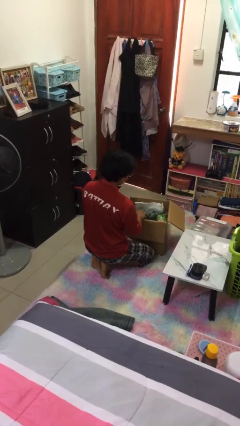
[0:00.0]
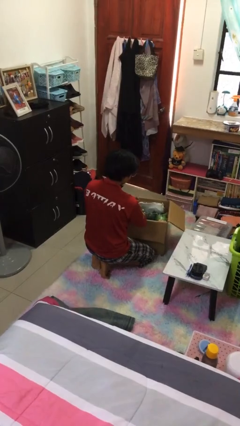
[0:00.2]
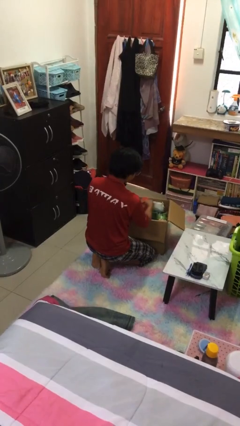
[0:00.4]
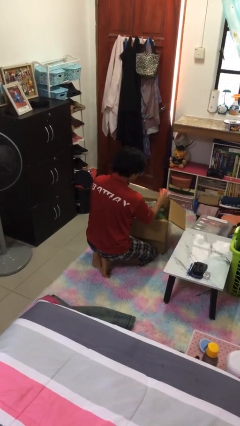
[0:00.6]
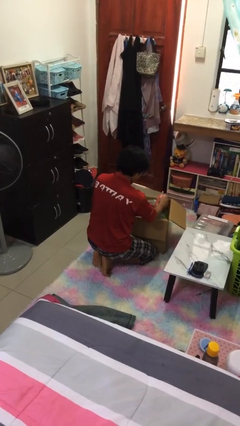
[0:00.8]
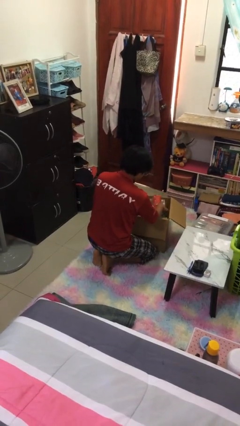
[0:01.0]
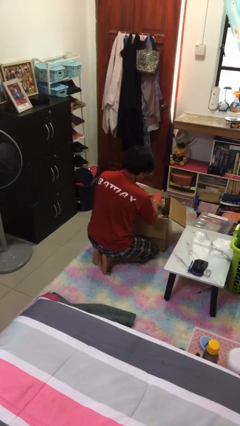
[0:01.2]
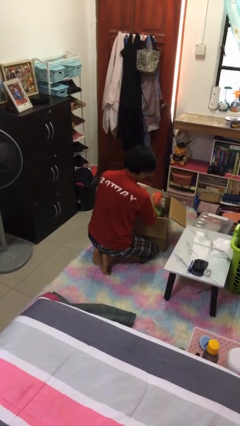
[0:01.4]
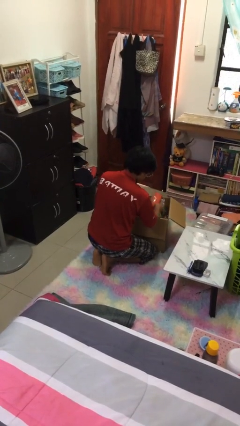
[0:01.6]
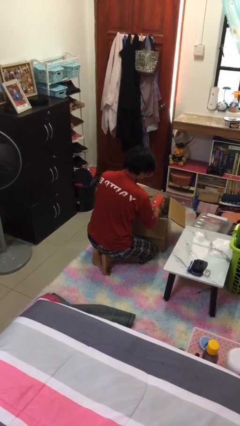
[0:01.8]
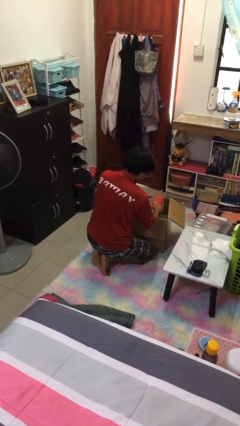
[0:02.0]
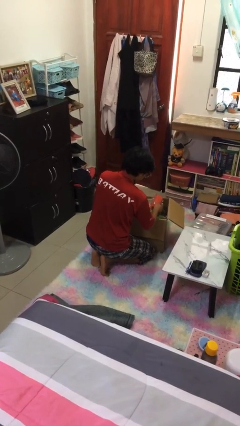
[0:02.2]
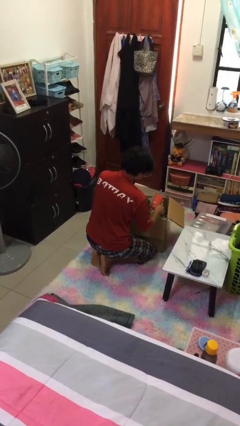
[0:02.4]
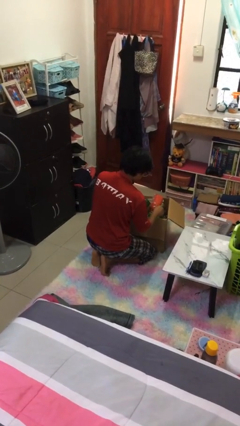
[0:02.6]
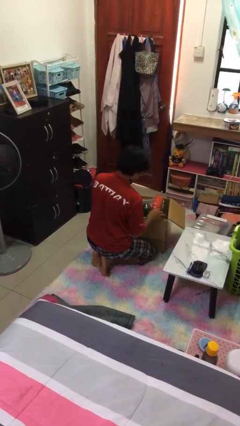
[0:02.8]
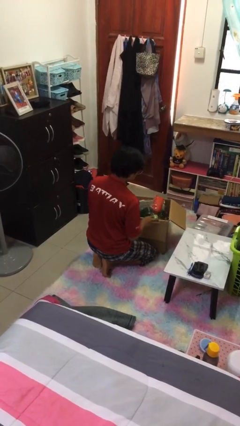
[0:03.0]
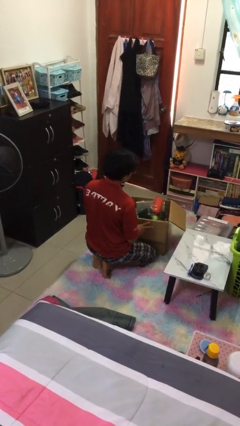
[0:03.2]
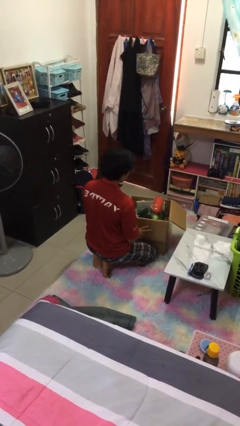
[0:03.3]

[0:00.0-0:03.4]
person searches in box

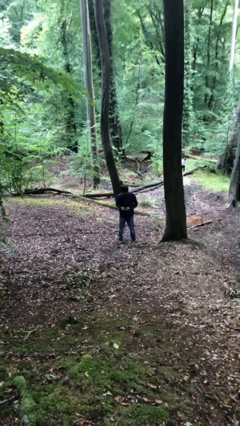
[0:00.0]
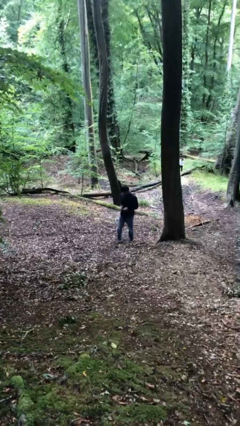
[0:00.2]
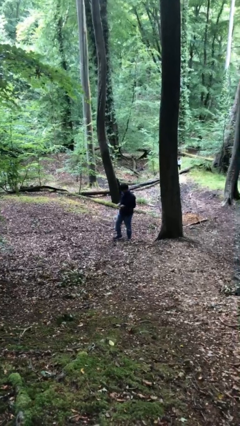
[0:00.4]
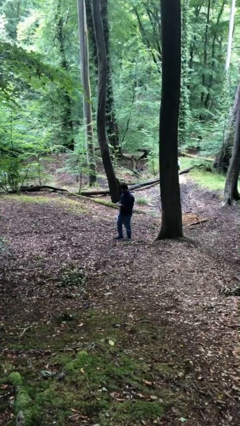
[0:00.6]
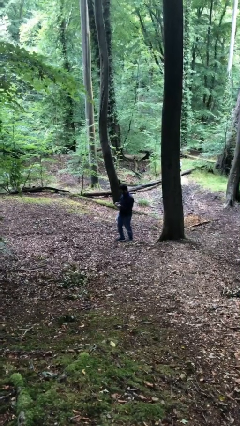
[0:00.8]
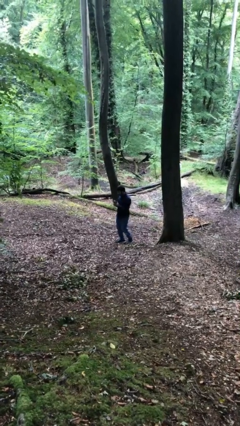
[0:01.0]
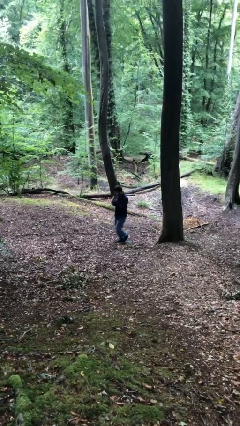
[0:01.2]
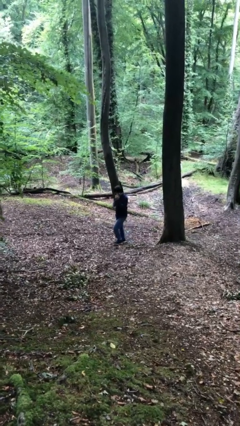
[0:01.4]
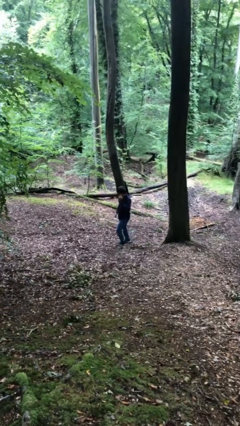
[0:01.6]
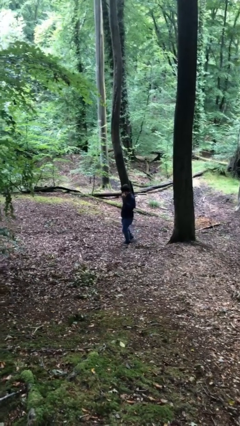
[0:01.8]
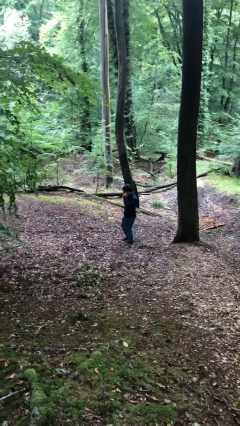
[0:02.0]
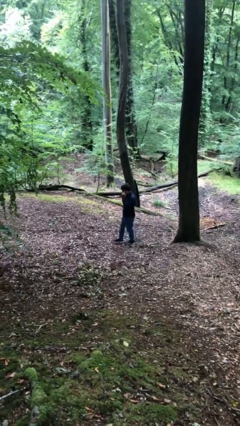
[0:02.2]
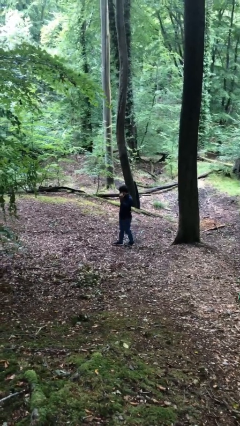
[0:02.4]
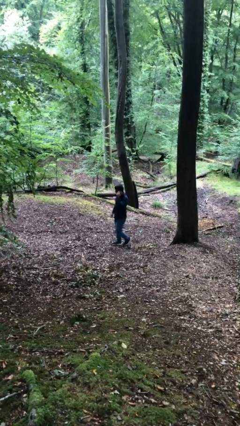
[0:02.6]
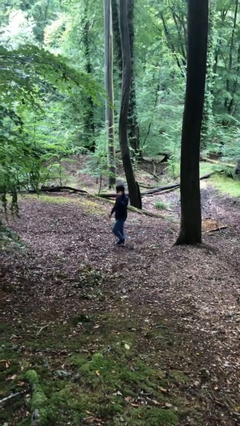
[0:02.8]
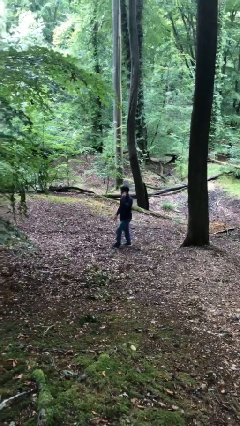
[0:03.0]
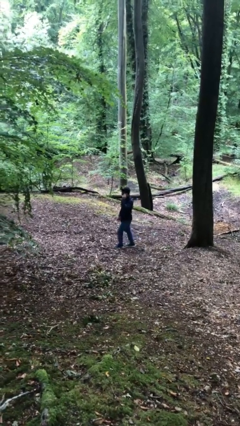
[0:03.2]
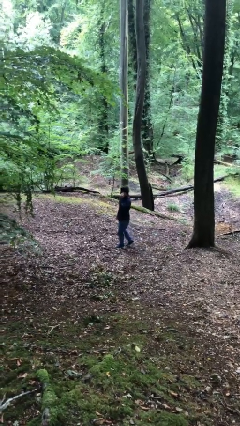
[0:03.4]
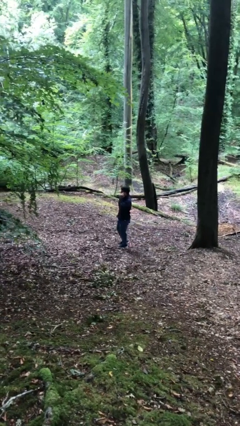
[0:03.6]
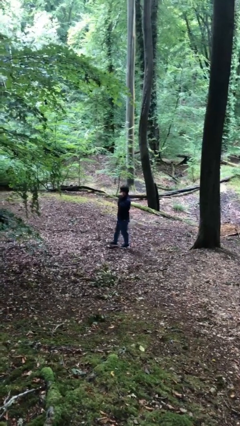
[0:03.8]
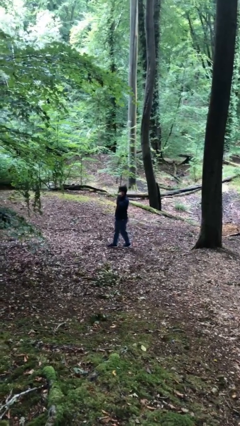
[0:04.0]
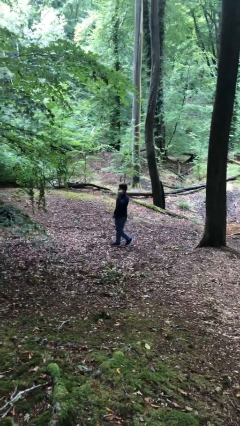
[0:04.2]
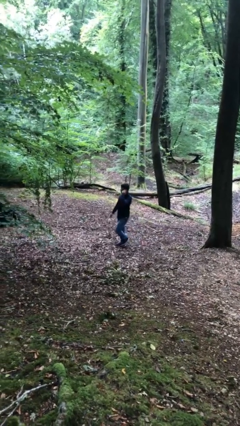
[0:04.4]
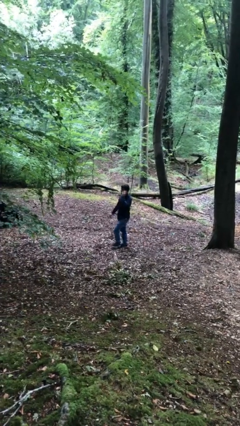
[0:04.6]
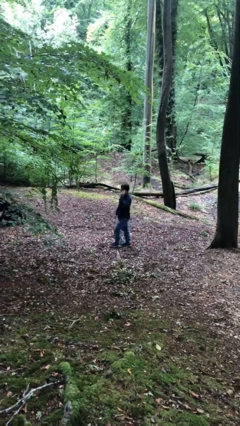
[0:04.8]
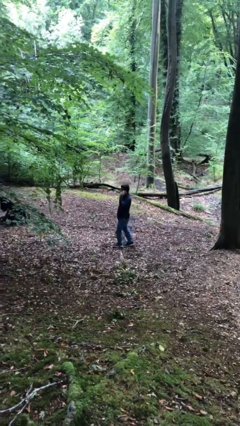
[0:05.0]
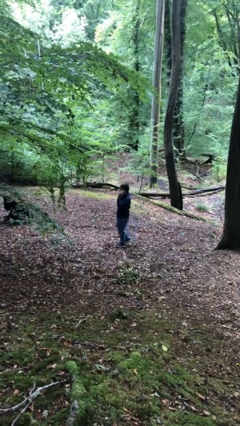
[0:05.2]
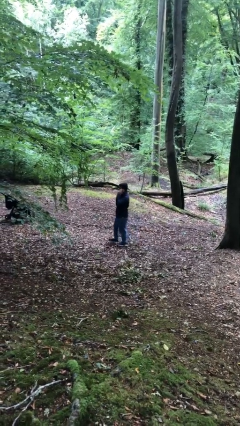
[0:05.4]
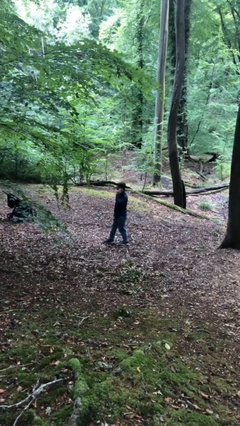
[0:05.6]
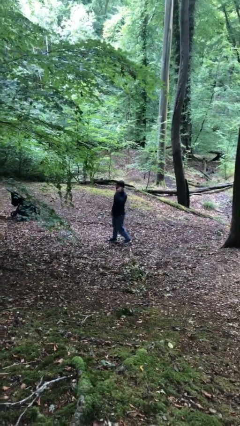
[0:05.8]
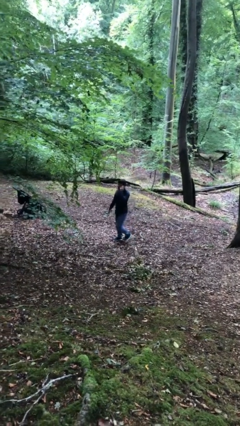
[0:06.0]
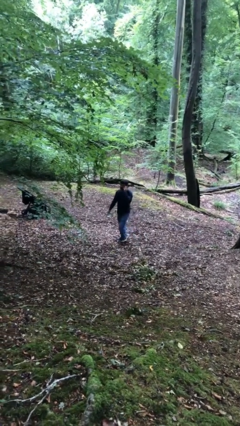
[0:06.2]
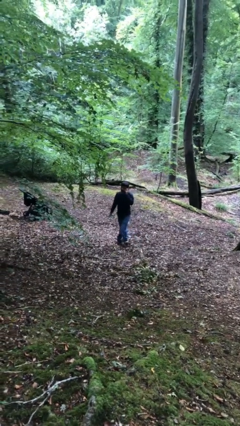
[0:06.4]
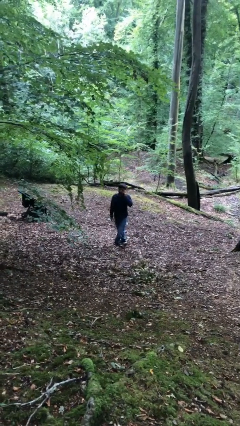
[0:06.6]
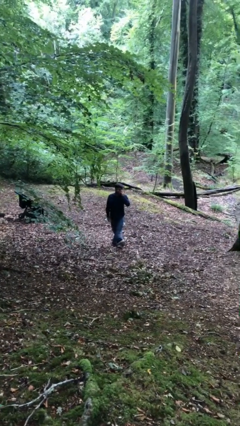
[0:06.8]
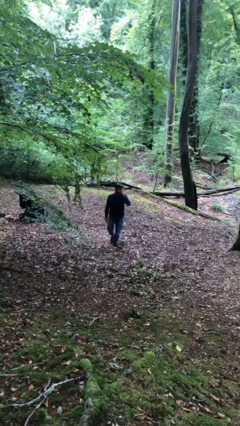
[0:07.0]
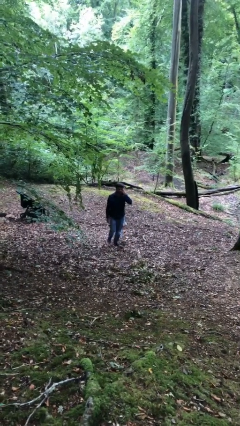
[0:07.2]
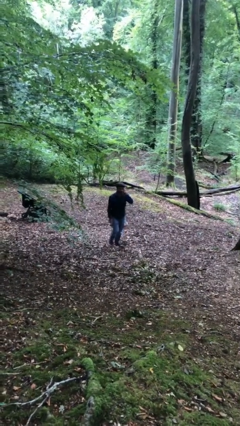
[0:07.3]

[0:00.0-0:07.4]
person talks on phone

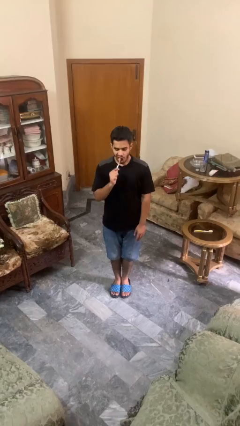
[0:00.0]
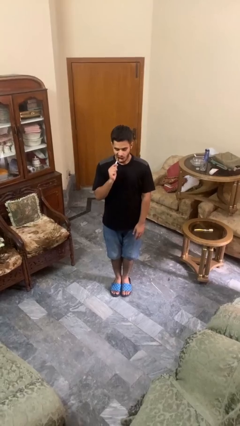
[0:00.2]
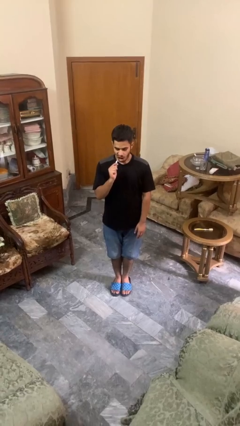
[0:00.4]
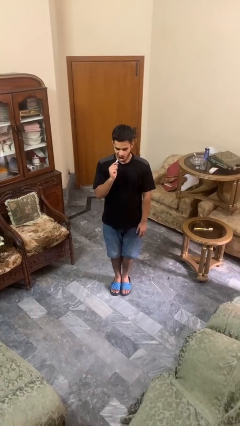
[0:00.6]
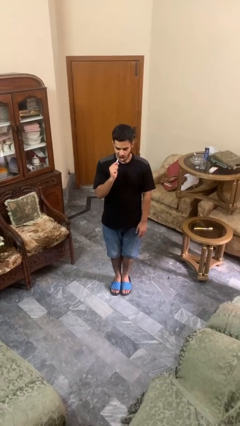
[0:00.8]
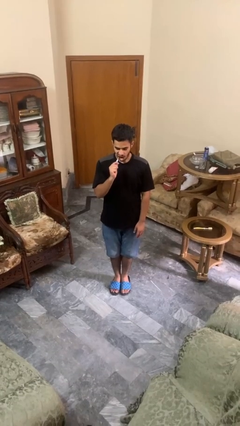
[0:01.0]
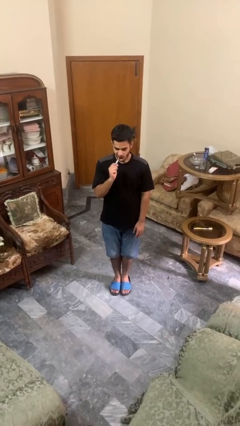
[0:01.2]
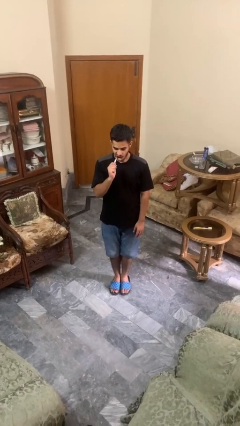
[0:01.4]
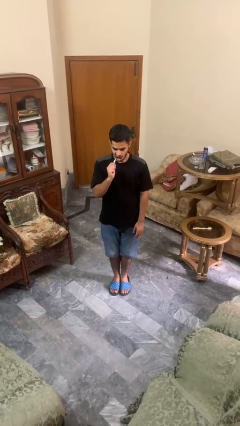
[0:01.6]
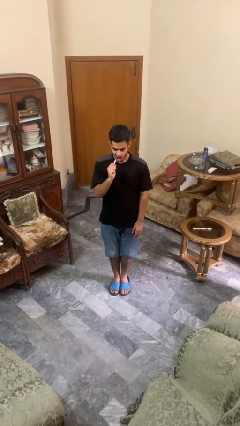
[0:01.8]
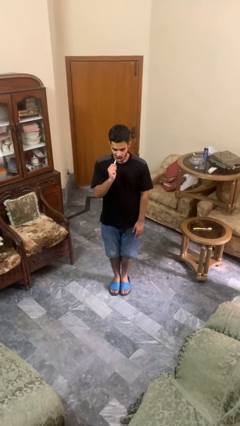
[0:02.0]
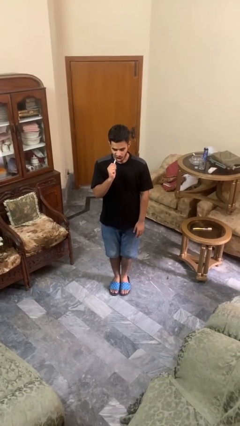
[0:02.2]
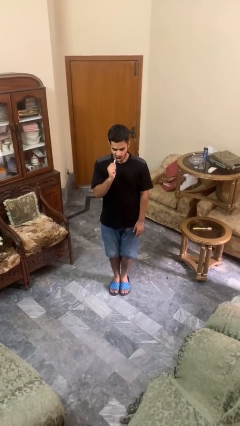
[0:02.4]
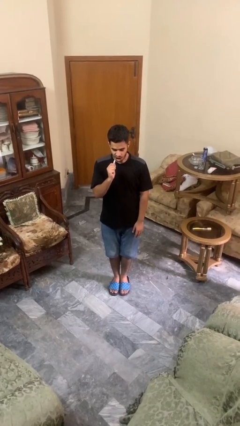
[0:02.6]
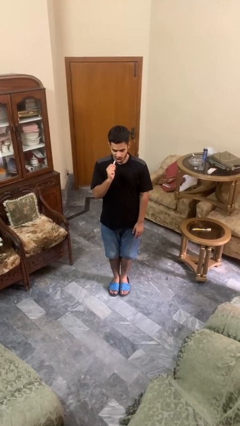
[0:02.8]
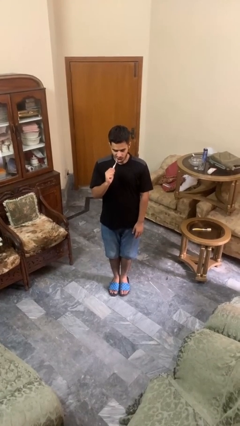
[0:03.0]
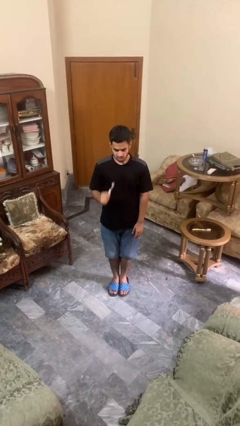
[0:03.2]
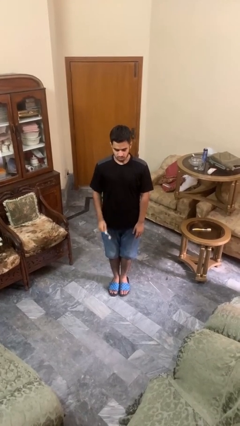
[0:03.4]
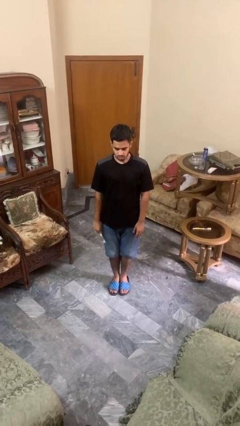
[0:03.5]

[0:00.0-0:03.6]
person brushes teeth

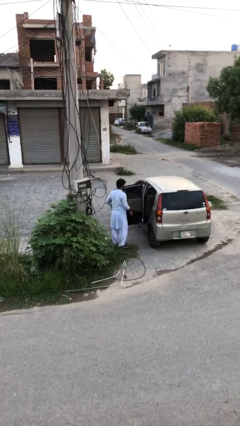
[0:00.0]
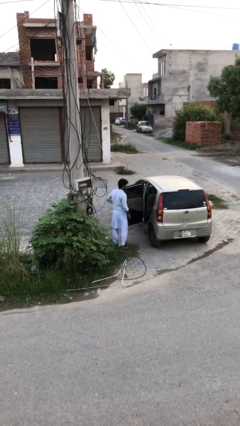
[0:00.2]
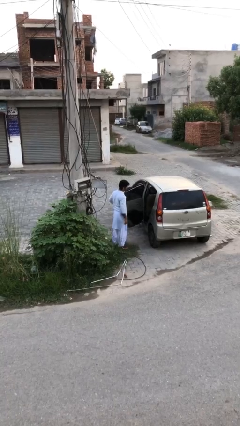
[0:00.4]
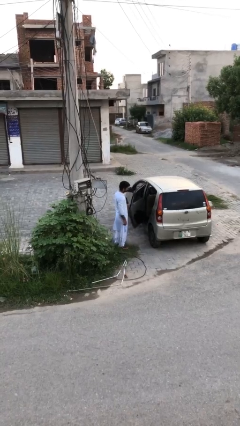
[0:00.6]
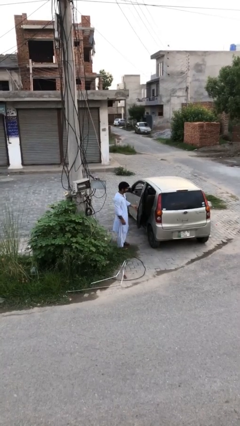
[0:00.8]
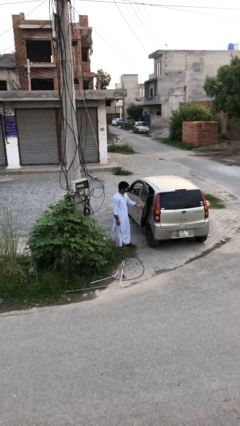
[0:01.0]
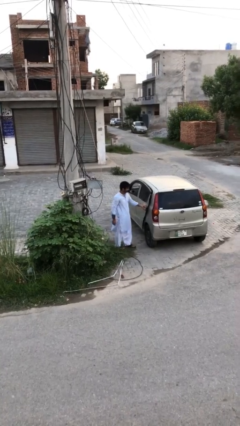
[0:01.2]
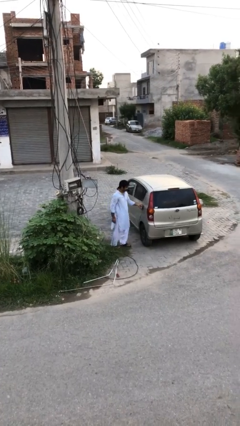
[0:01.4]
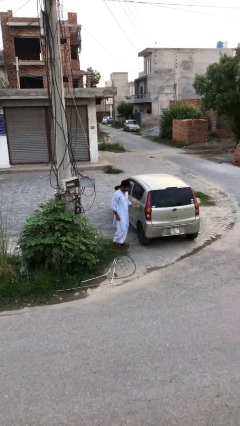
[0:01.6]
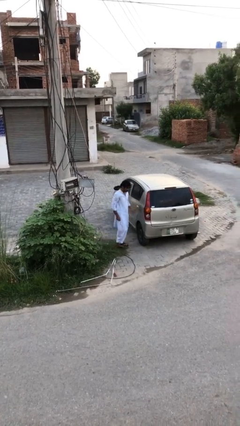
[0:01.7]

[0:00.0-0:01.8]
person closes car door

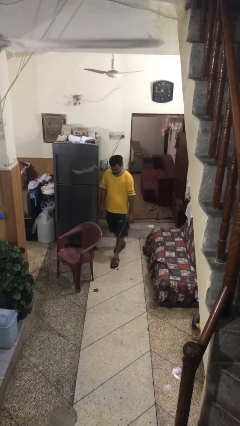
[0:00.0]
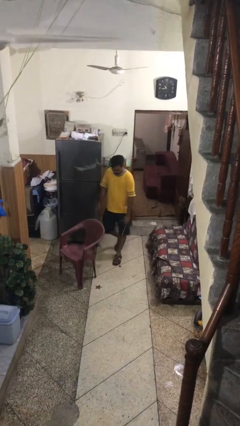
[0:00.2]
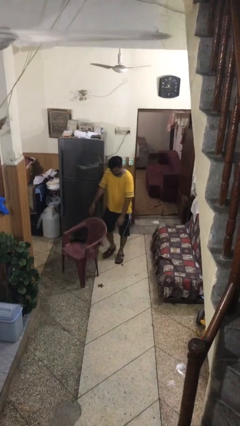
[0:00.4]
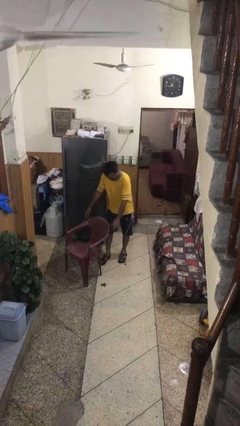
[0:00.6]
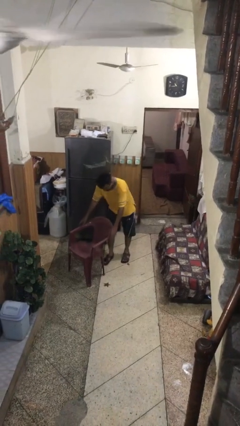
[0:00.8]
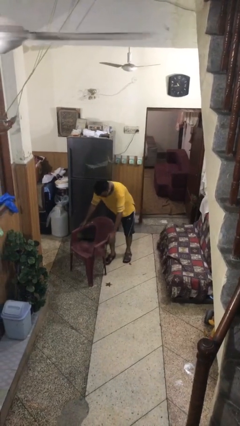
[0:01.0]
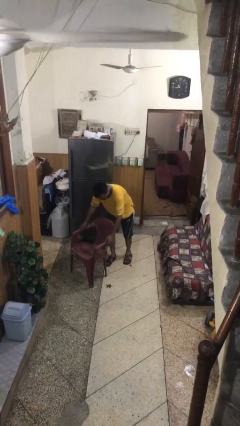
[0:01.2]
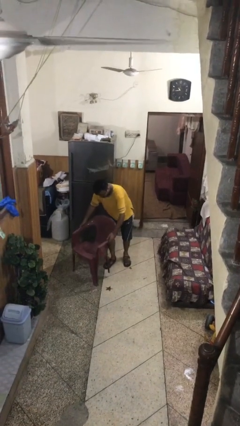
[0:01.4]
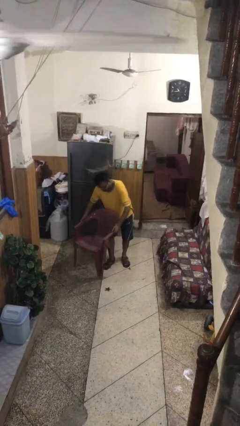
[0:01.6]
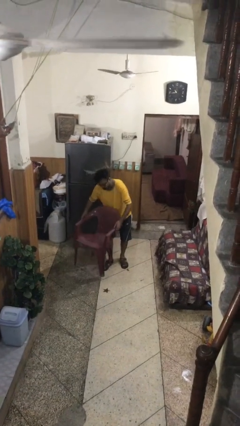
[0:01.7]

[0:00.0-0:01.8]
person picks up object from floor
